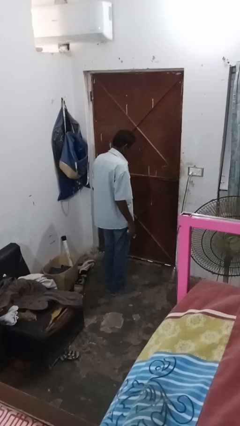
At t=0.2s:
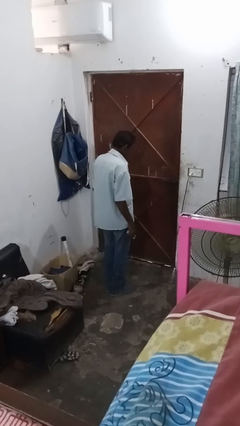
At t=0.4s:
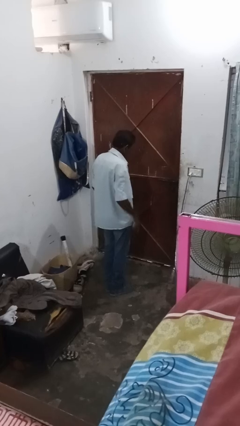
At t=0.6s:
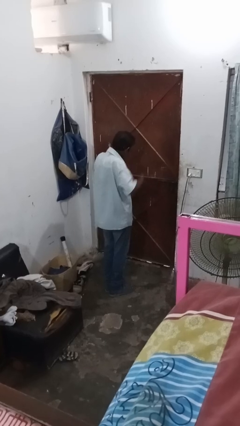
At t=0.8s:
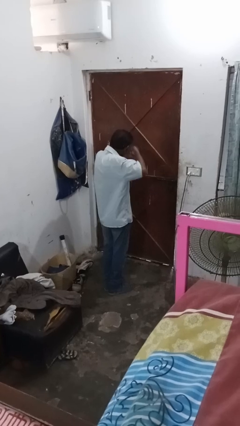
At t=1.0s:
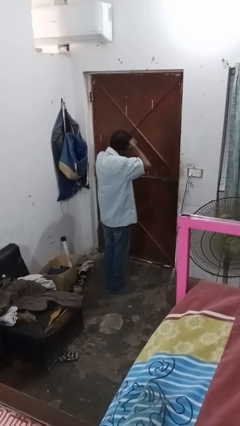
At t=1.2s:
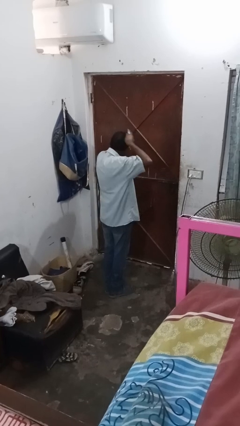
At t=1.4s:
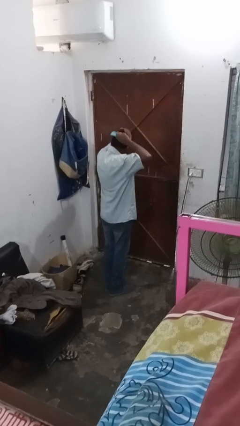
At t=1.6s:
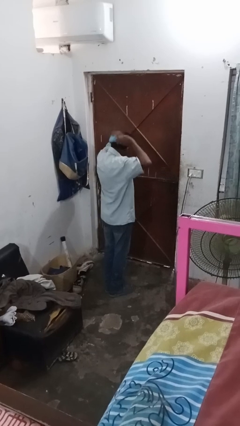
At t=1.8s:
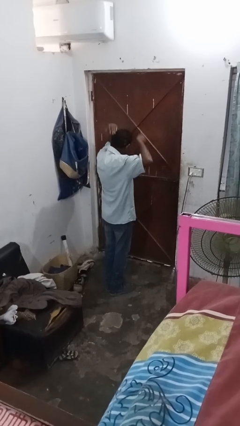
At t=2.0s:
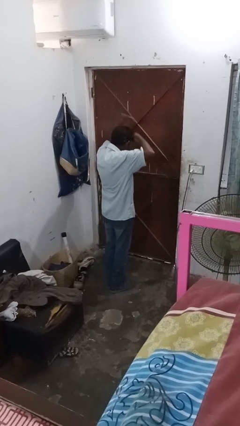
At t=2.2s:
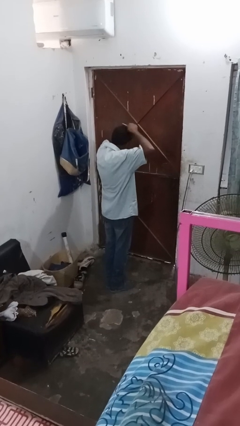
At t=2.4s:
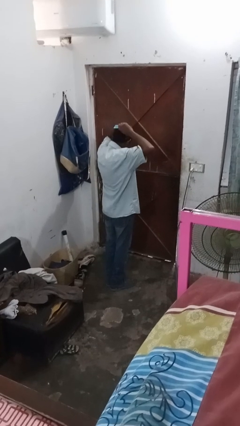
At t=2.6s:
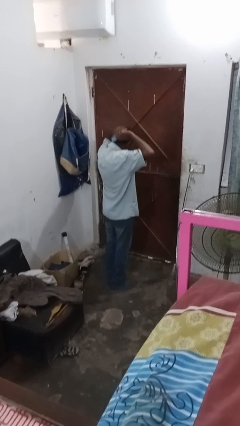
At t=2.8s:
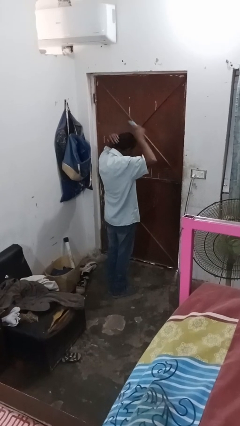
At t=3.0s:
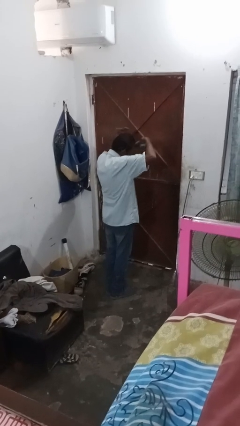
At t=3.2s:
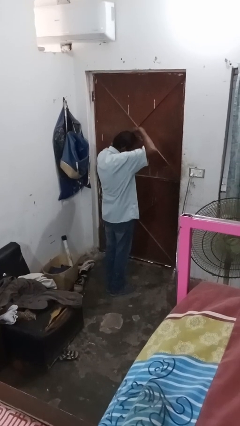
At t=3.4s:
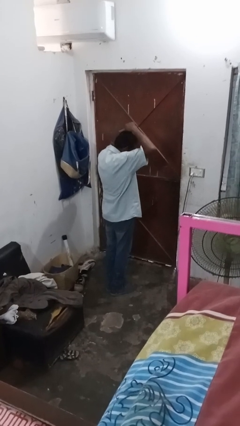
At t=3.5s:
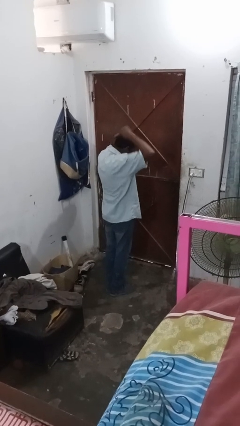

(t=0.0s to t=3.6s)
person brushes hair

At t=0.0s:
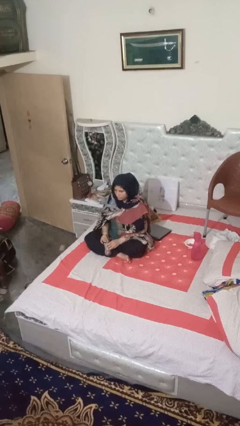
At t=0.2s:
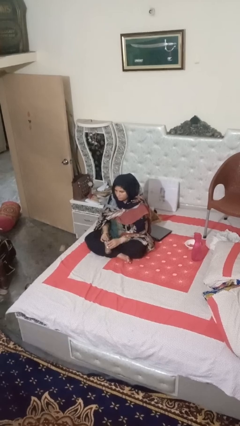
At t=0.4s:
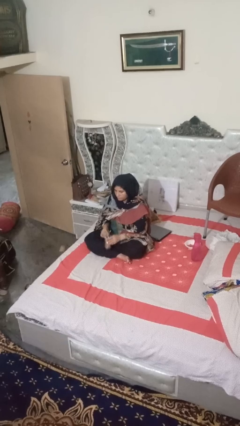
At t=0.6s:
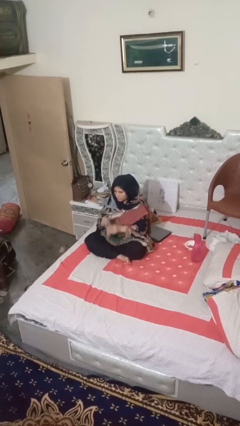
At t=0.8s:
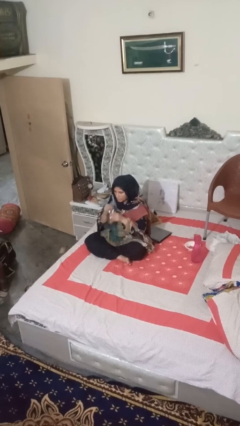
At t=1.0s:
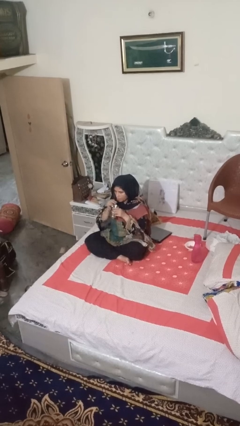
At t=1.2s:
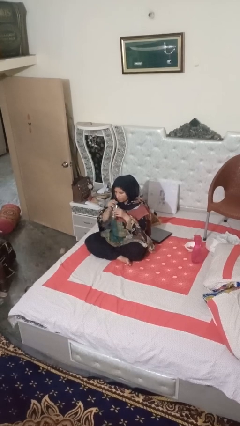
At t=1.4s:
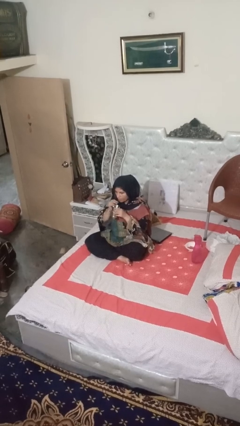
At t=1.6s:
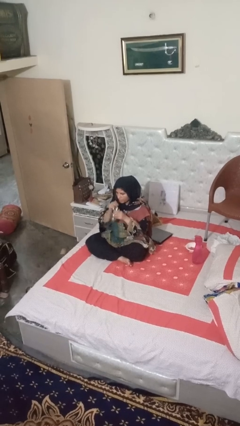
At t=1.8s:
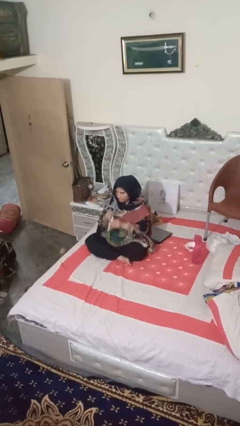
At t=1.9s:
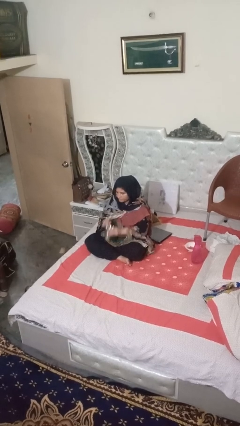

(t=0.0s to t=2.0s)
person drinks from straw

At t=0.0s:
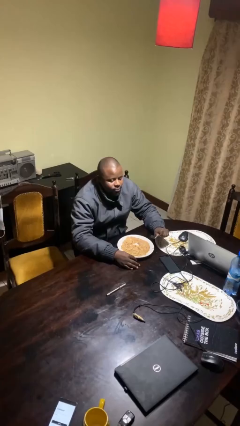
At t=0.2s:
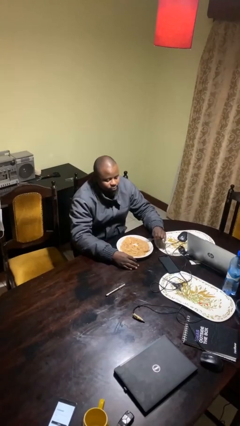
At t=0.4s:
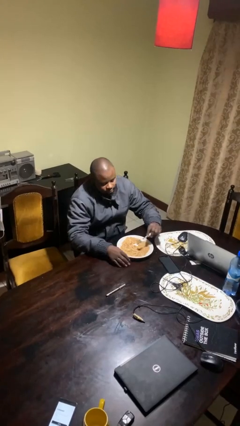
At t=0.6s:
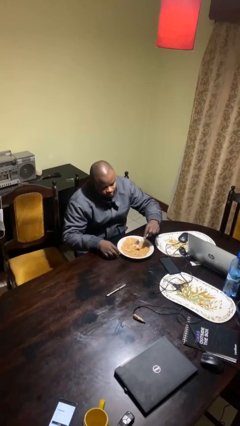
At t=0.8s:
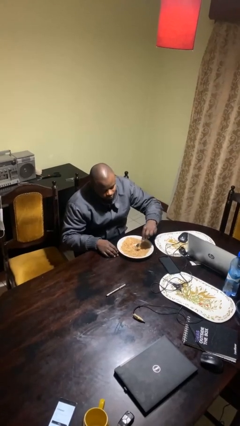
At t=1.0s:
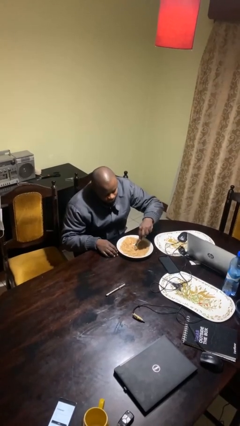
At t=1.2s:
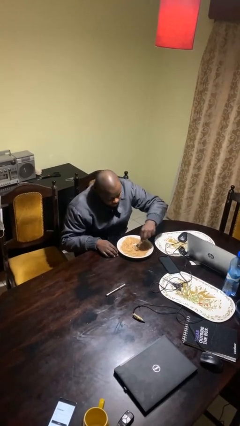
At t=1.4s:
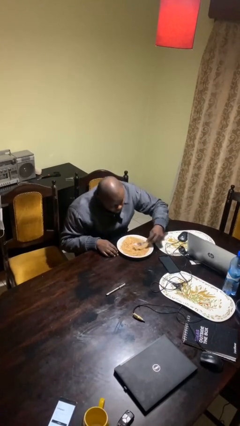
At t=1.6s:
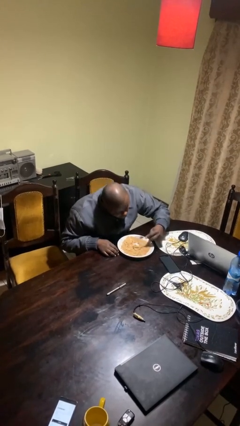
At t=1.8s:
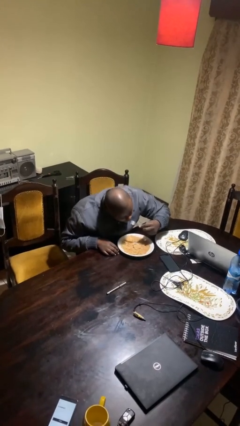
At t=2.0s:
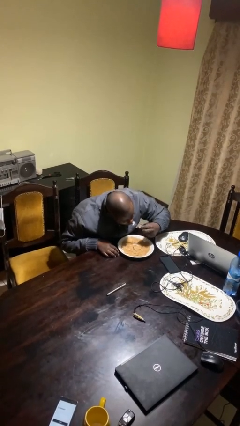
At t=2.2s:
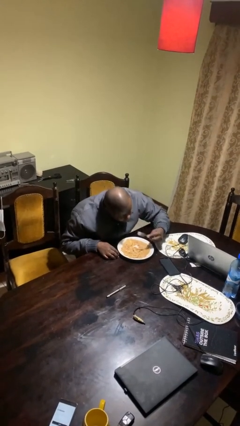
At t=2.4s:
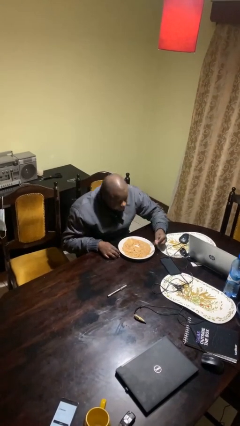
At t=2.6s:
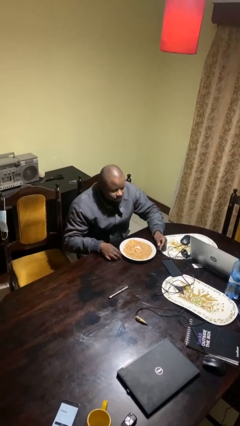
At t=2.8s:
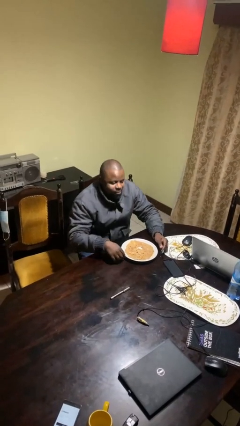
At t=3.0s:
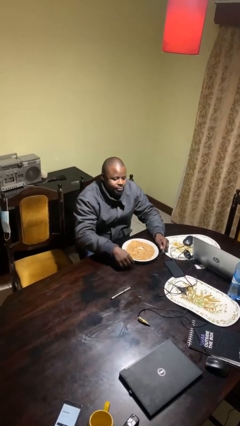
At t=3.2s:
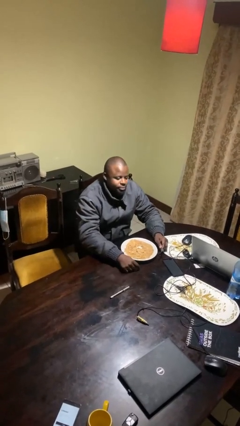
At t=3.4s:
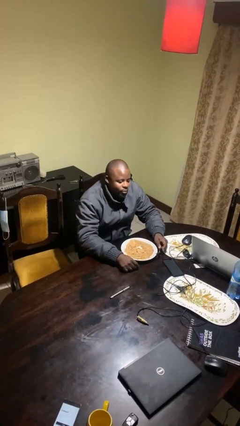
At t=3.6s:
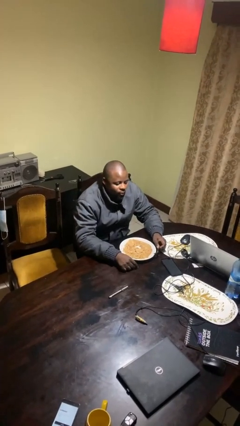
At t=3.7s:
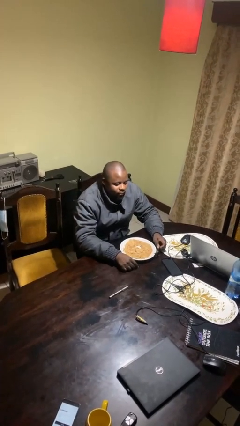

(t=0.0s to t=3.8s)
person eats with utensil

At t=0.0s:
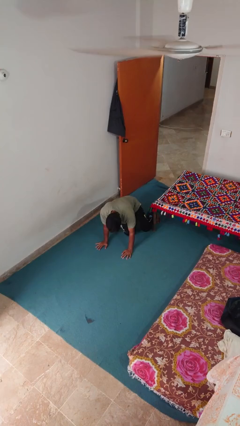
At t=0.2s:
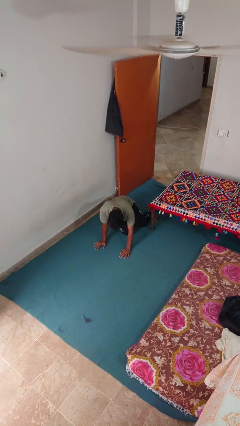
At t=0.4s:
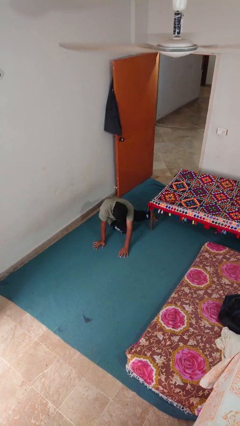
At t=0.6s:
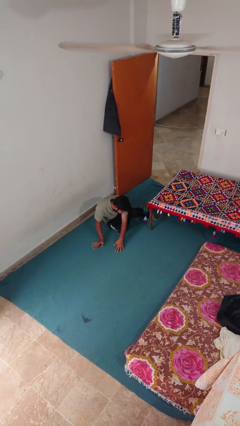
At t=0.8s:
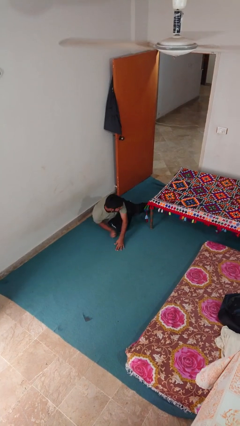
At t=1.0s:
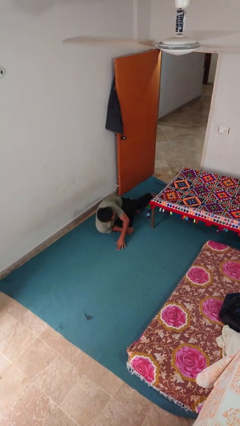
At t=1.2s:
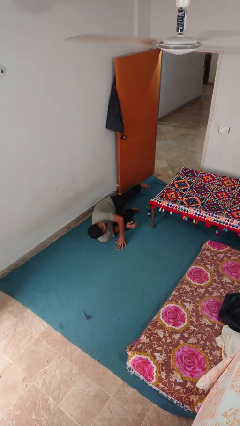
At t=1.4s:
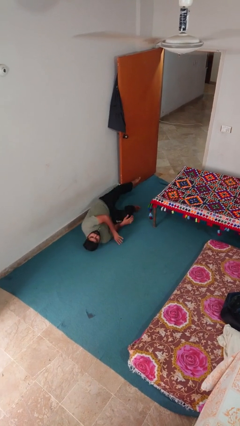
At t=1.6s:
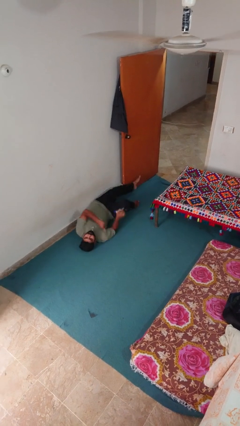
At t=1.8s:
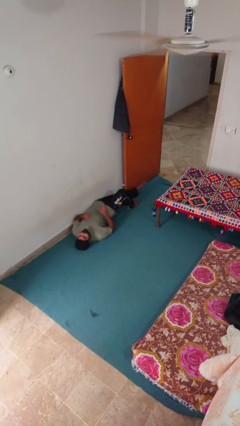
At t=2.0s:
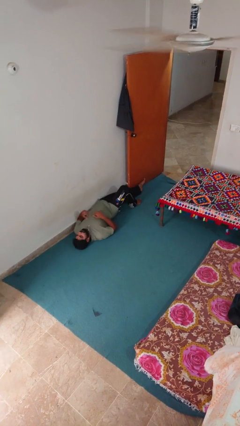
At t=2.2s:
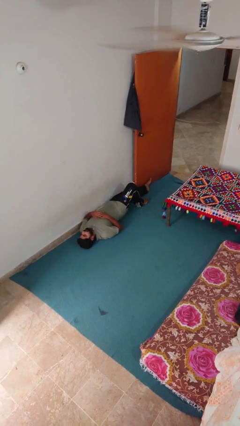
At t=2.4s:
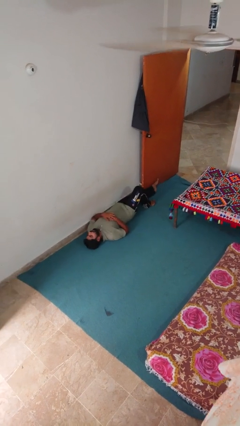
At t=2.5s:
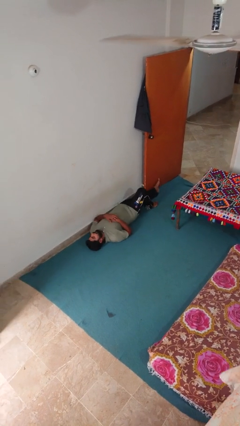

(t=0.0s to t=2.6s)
person lies down on floor

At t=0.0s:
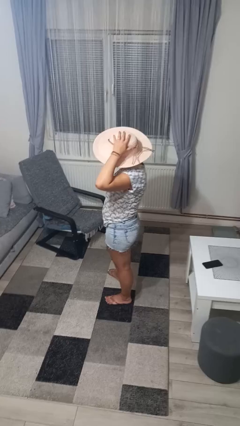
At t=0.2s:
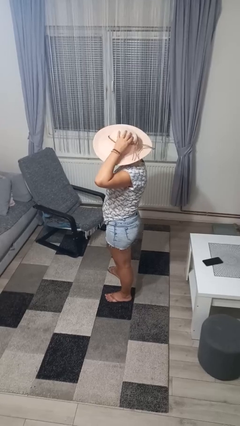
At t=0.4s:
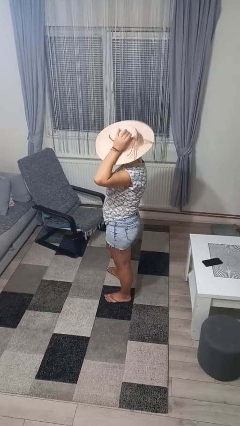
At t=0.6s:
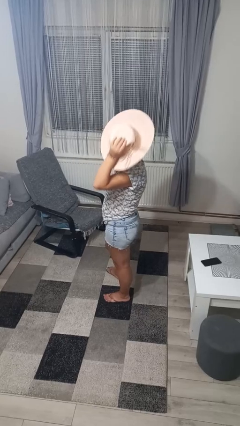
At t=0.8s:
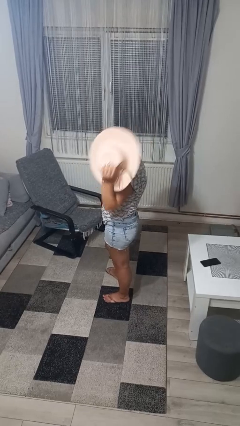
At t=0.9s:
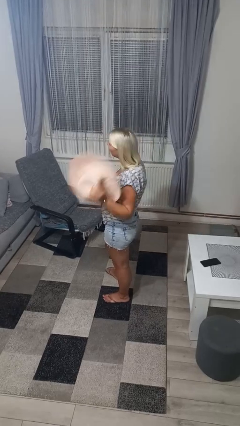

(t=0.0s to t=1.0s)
person takes off hat

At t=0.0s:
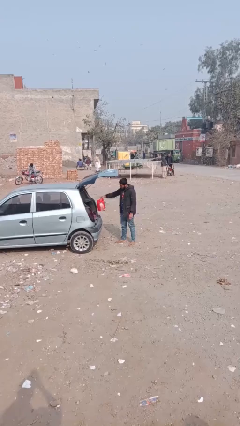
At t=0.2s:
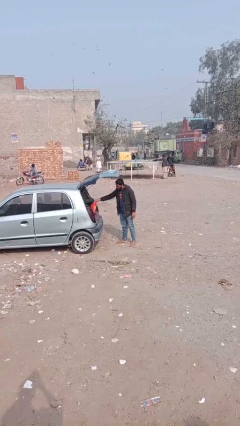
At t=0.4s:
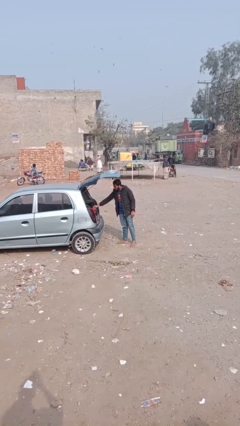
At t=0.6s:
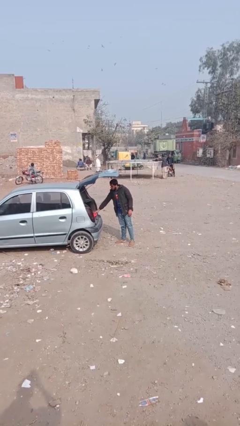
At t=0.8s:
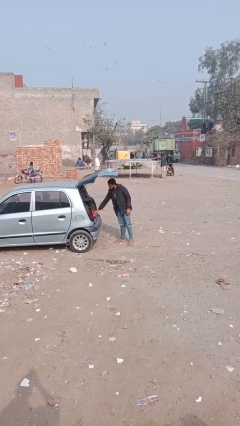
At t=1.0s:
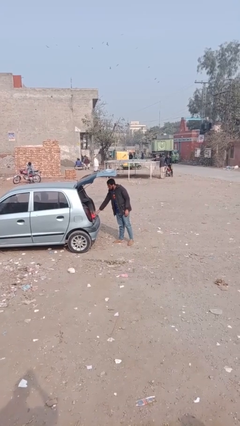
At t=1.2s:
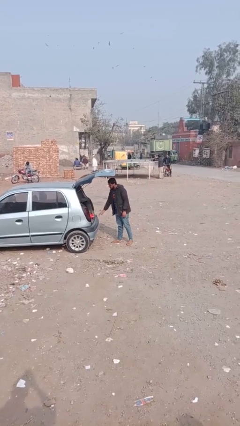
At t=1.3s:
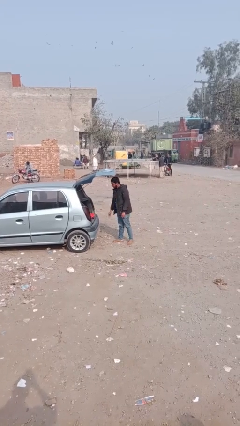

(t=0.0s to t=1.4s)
person loads car

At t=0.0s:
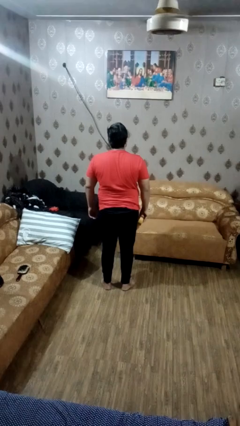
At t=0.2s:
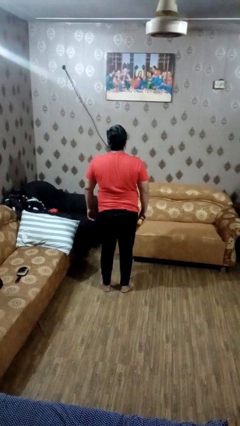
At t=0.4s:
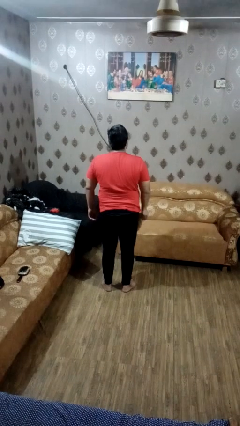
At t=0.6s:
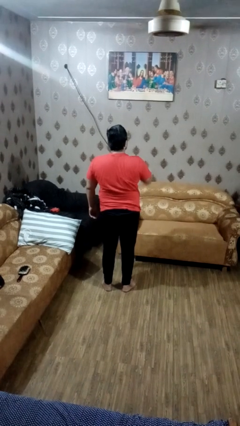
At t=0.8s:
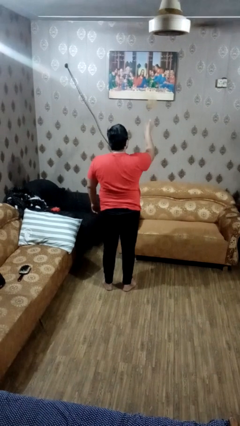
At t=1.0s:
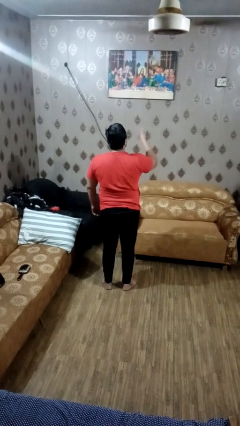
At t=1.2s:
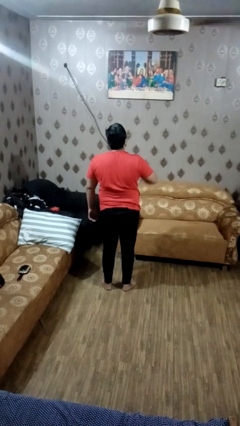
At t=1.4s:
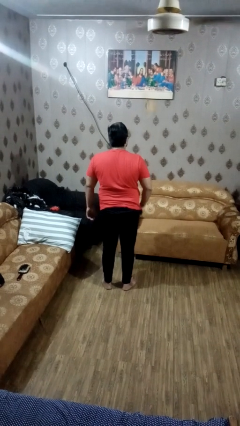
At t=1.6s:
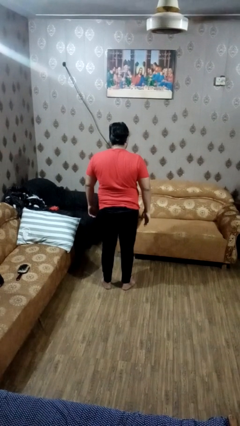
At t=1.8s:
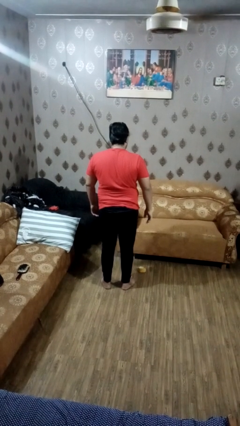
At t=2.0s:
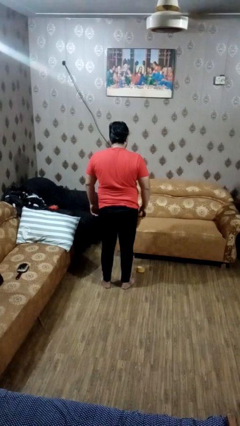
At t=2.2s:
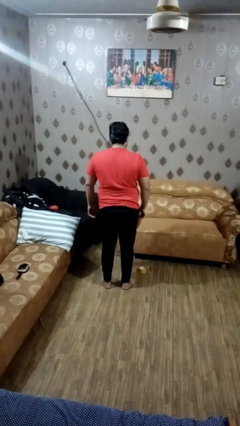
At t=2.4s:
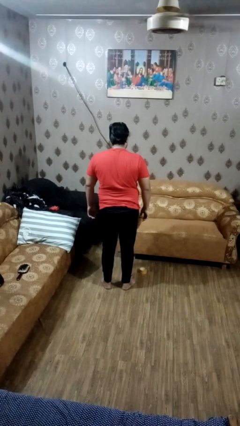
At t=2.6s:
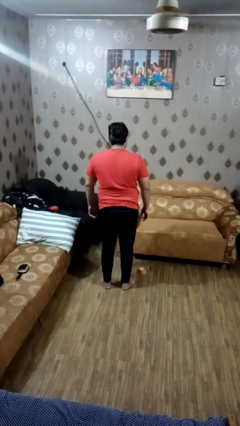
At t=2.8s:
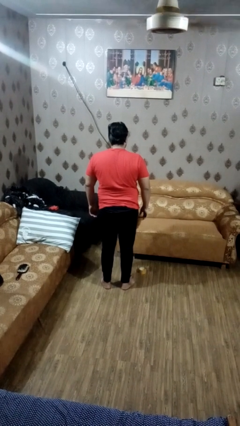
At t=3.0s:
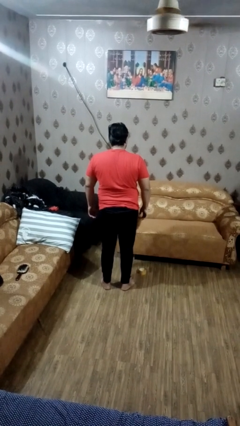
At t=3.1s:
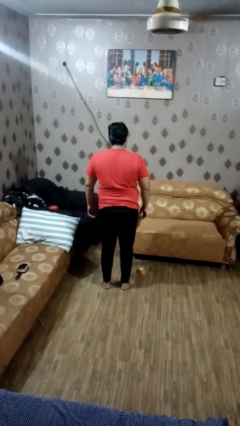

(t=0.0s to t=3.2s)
person throws object into air
